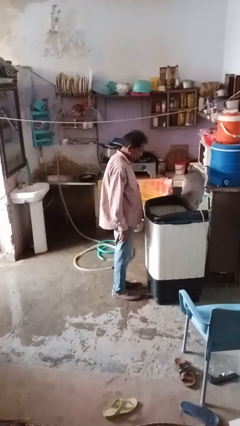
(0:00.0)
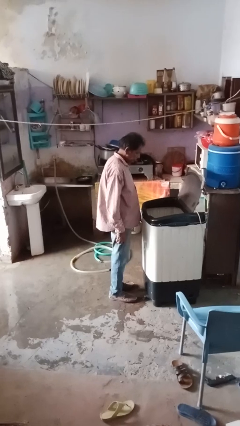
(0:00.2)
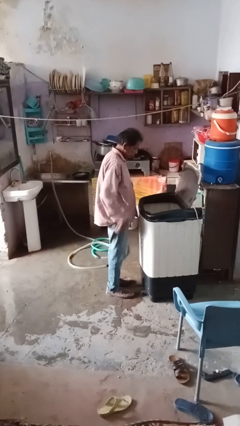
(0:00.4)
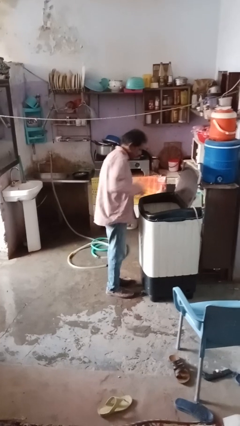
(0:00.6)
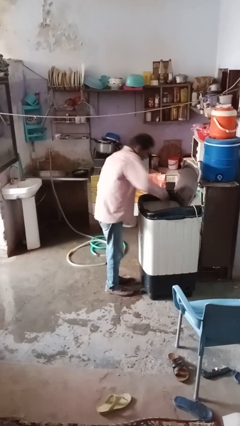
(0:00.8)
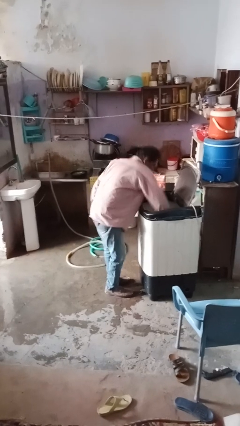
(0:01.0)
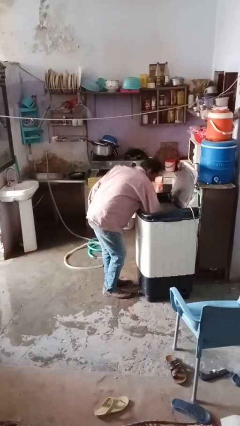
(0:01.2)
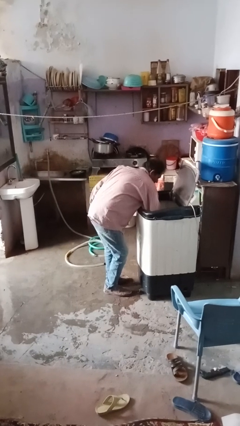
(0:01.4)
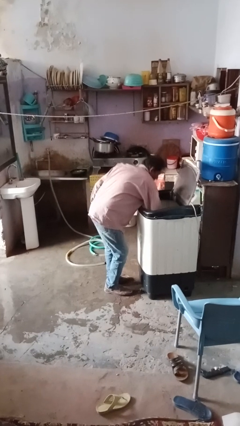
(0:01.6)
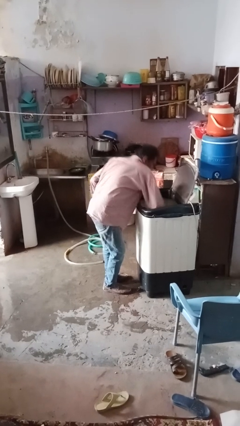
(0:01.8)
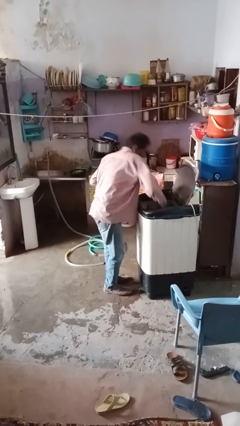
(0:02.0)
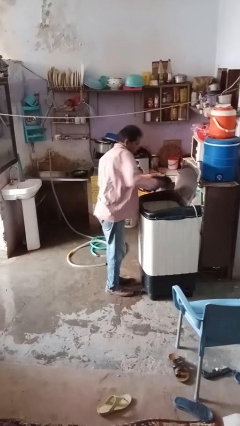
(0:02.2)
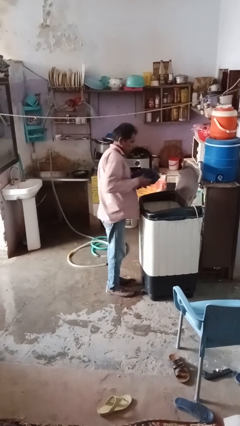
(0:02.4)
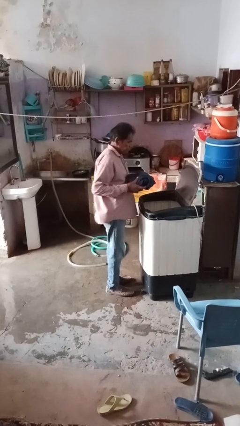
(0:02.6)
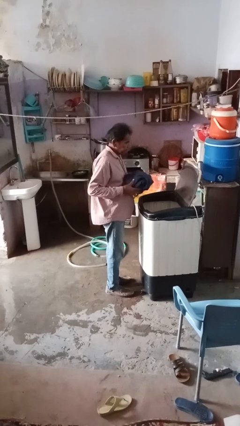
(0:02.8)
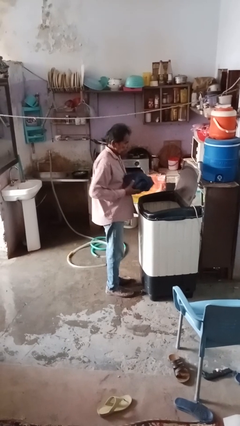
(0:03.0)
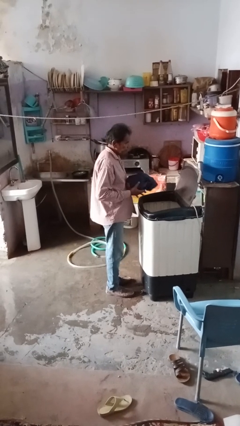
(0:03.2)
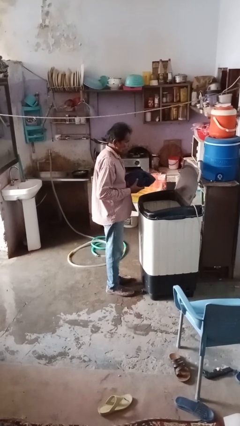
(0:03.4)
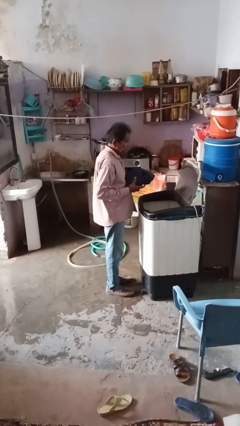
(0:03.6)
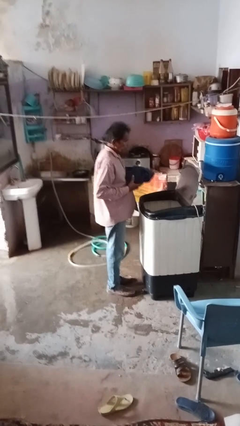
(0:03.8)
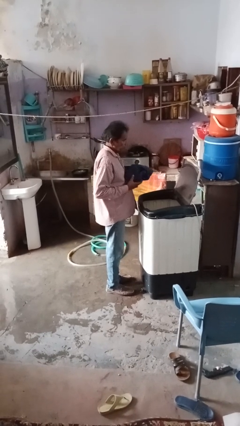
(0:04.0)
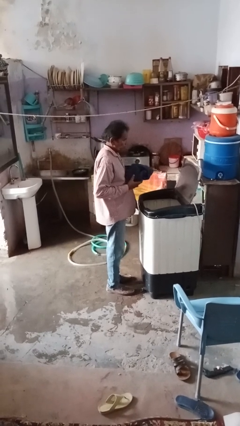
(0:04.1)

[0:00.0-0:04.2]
person unloads clotheswasher

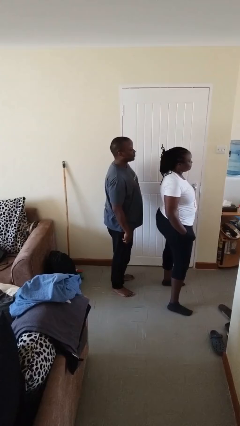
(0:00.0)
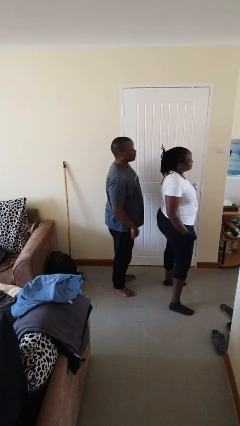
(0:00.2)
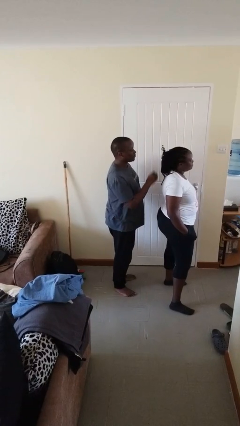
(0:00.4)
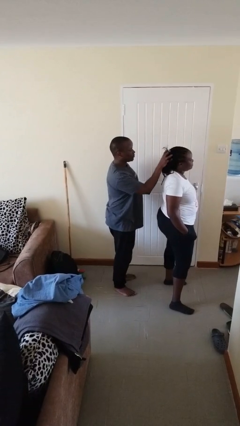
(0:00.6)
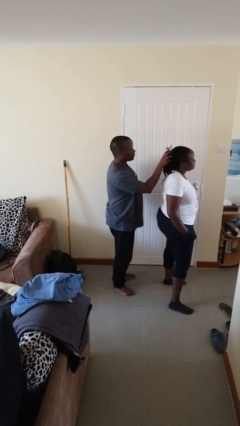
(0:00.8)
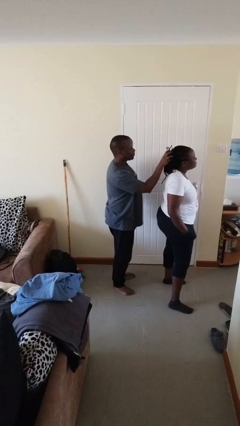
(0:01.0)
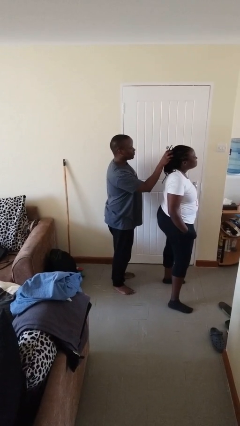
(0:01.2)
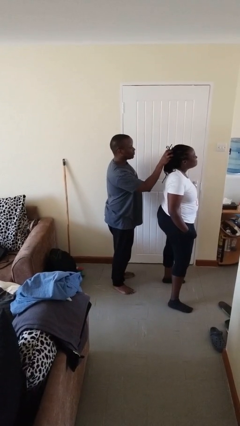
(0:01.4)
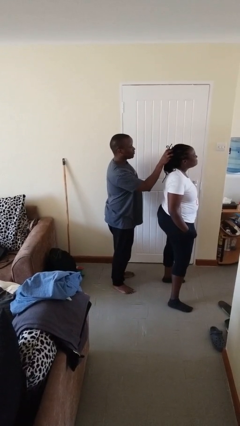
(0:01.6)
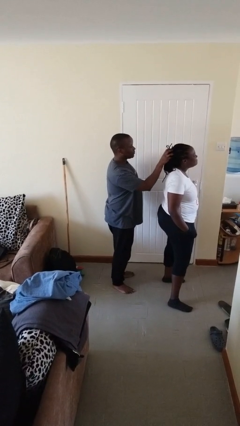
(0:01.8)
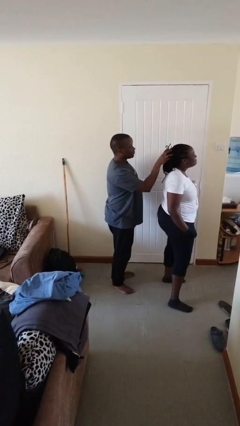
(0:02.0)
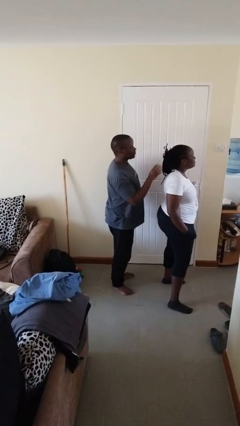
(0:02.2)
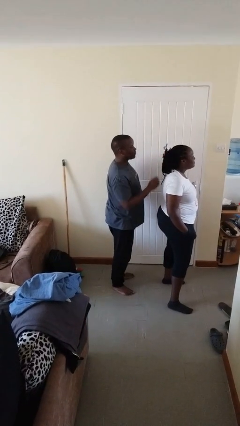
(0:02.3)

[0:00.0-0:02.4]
person grabs person by hair

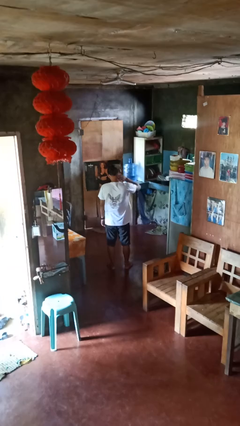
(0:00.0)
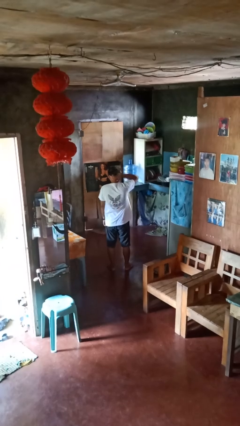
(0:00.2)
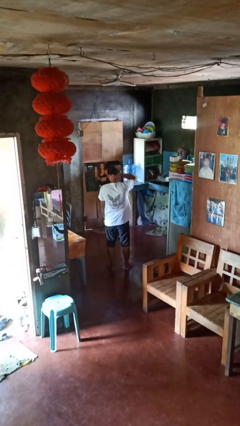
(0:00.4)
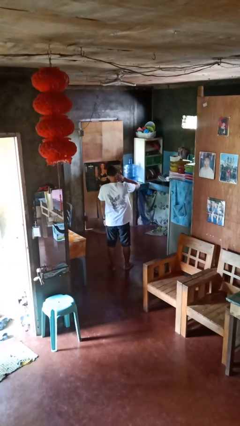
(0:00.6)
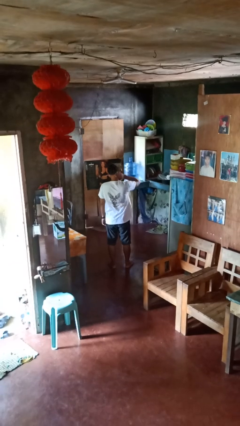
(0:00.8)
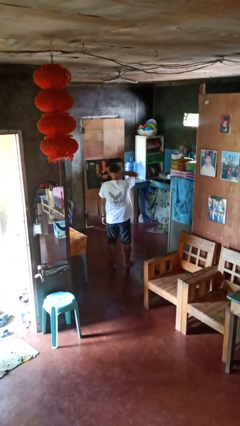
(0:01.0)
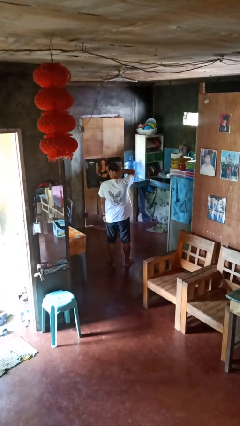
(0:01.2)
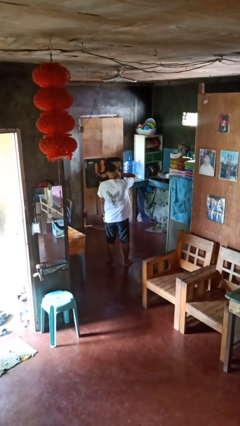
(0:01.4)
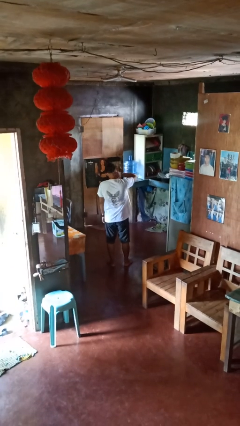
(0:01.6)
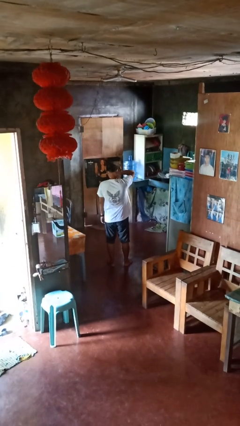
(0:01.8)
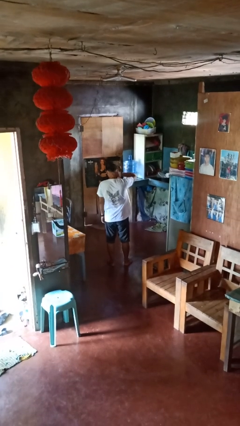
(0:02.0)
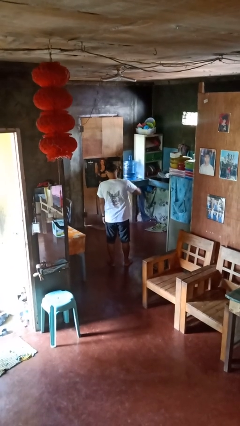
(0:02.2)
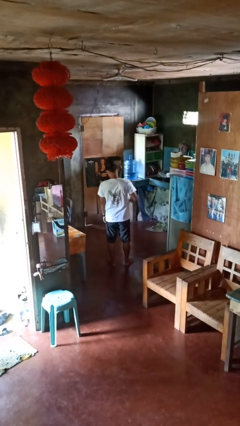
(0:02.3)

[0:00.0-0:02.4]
person rubs neck

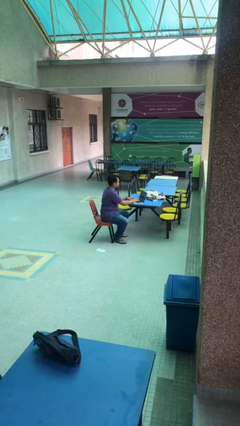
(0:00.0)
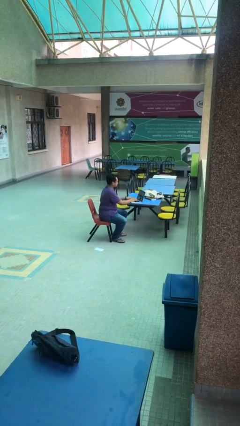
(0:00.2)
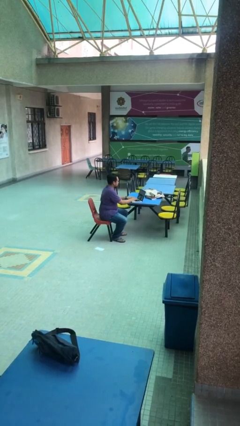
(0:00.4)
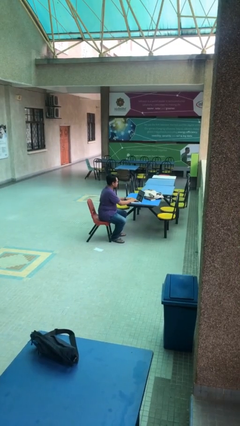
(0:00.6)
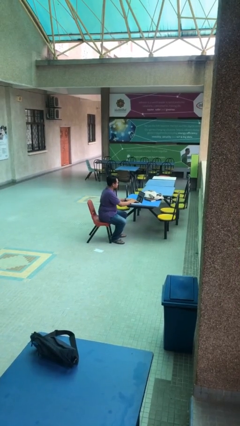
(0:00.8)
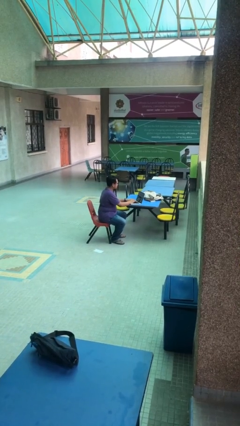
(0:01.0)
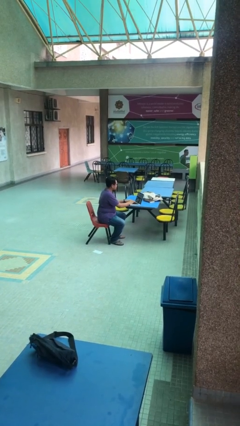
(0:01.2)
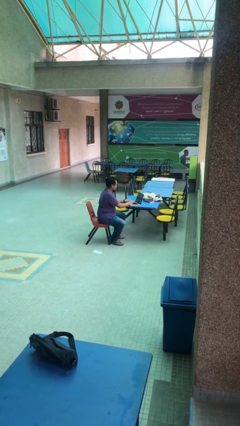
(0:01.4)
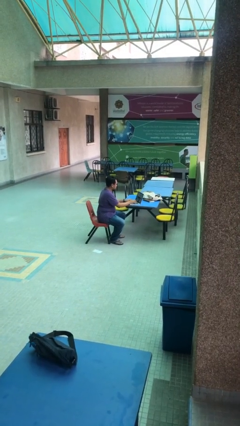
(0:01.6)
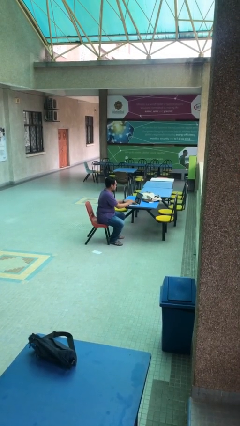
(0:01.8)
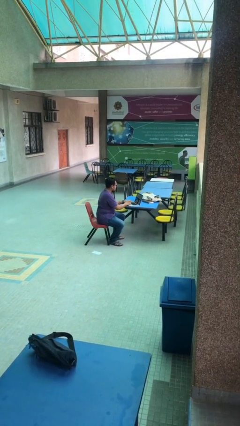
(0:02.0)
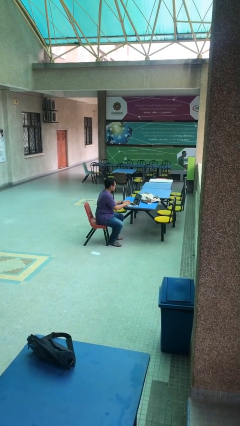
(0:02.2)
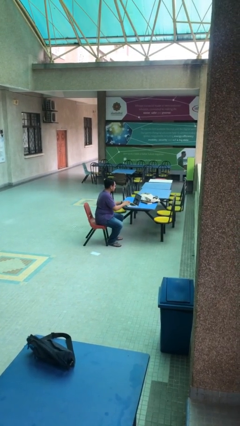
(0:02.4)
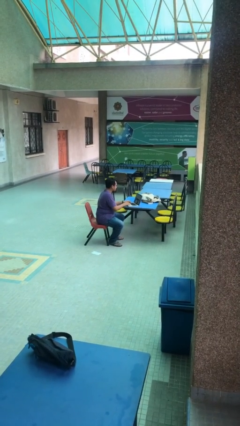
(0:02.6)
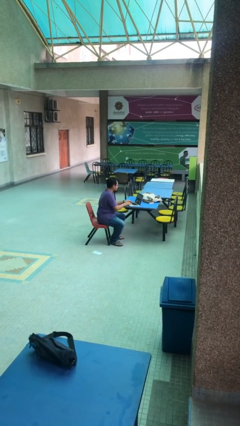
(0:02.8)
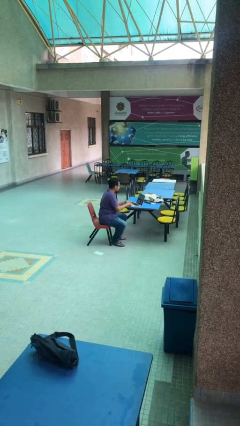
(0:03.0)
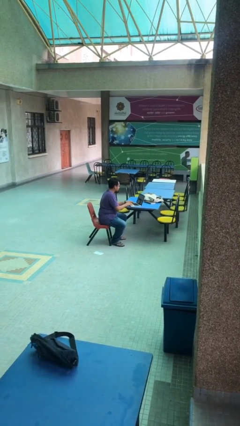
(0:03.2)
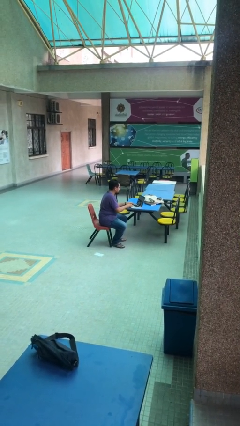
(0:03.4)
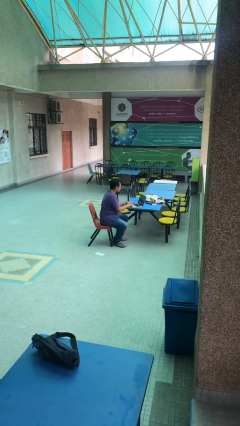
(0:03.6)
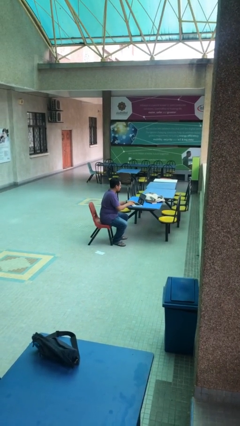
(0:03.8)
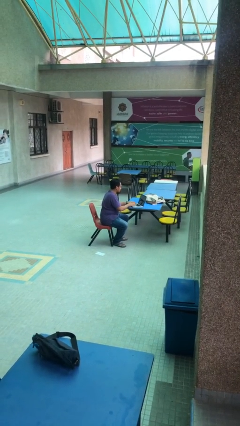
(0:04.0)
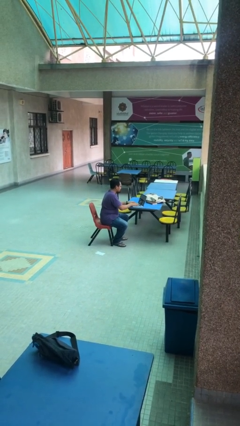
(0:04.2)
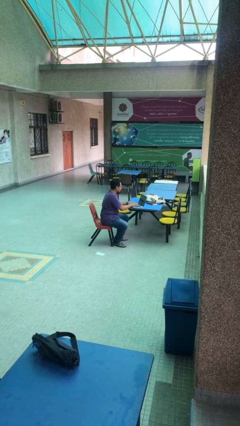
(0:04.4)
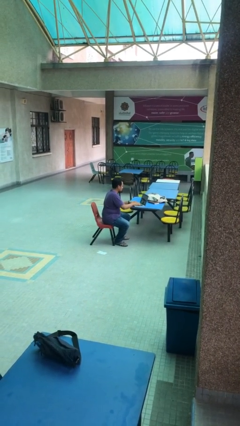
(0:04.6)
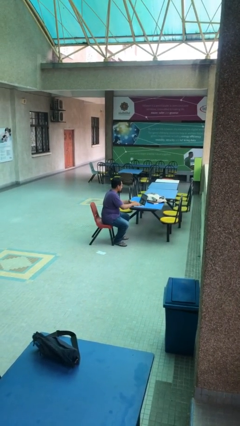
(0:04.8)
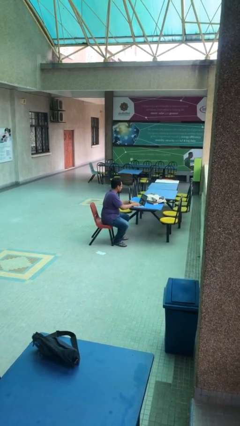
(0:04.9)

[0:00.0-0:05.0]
person interacts with laptop

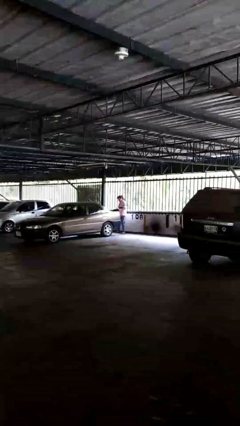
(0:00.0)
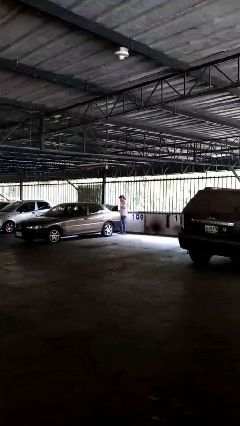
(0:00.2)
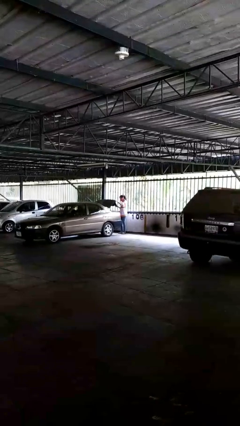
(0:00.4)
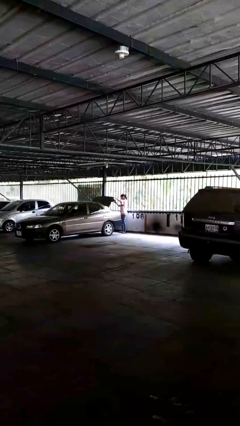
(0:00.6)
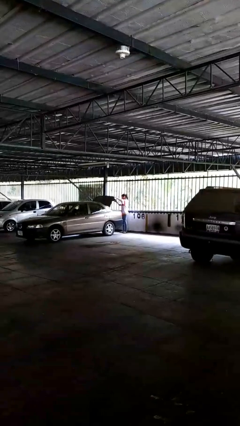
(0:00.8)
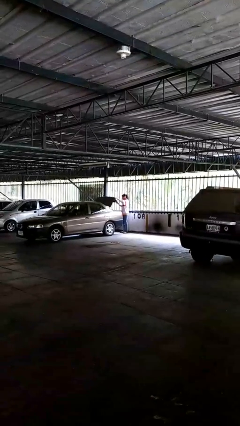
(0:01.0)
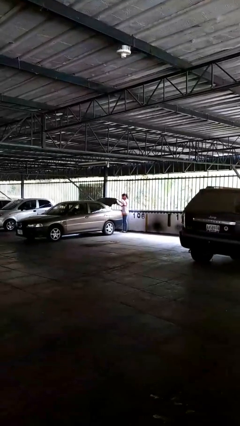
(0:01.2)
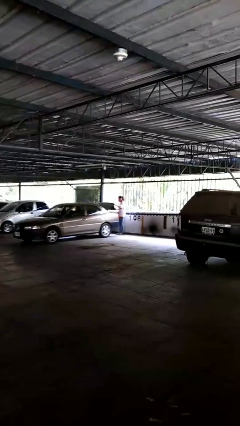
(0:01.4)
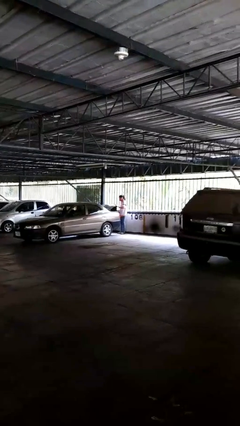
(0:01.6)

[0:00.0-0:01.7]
person opens car trunk

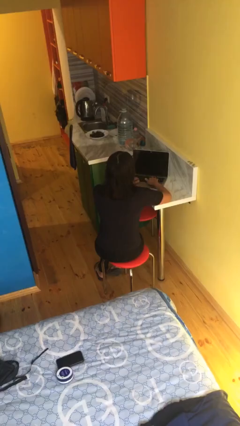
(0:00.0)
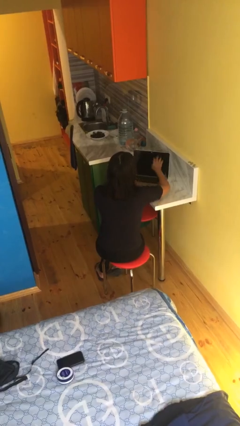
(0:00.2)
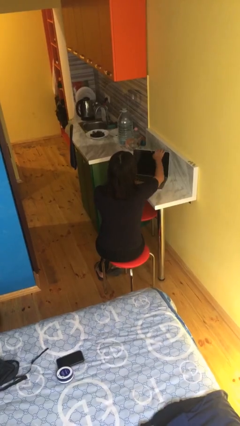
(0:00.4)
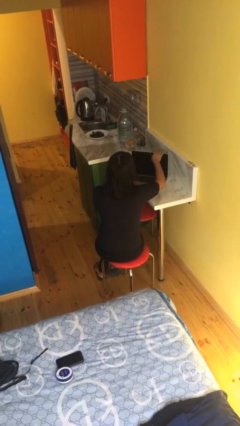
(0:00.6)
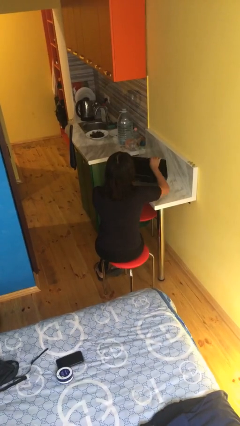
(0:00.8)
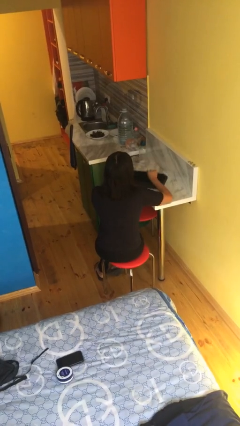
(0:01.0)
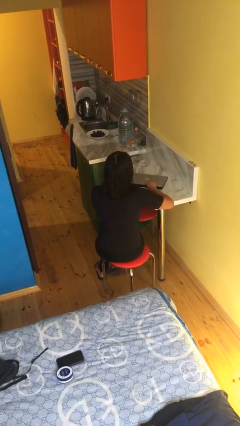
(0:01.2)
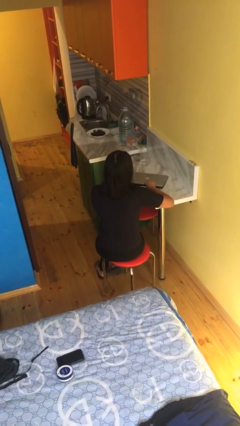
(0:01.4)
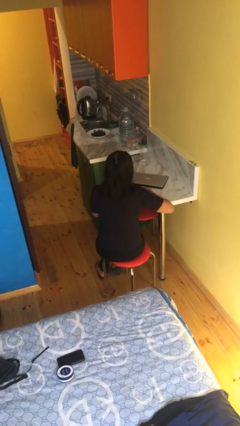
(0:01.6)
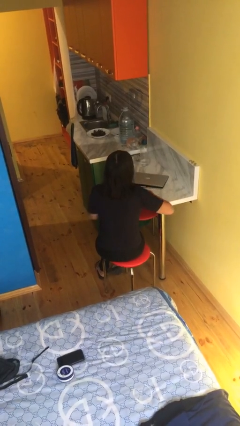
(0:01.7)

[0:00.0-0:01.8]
person closes laptop
